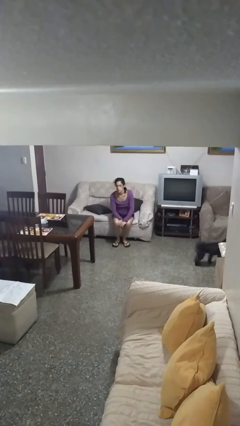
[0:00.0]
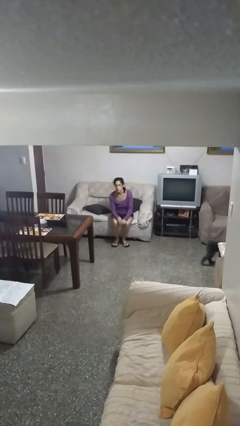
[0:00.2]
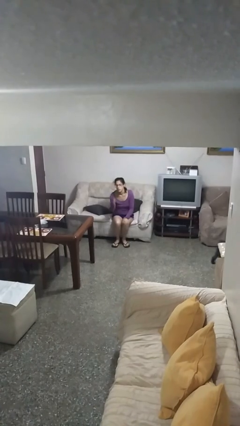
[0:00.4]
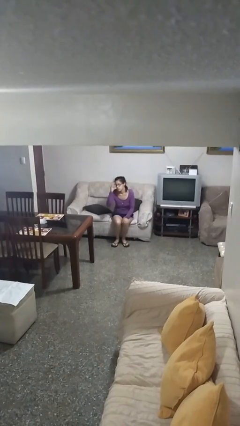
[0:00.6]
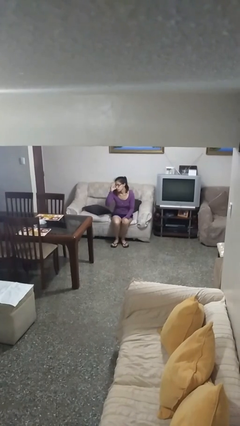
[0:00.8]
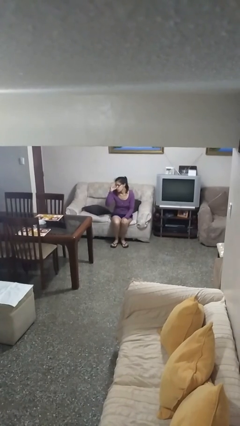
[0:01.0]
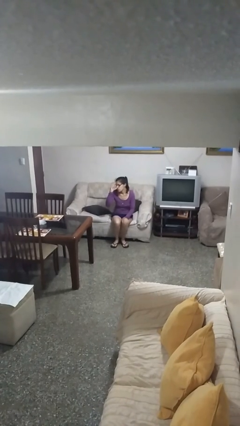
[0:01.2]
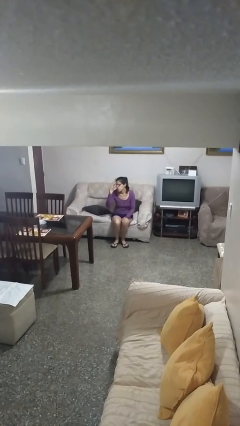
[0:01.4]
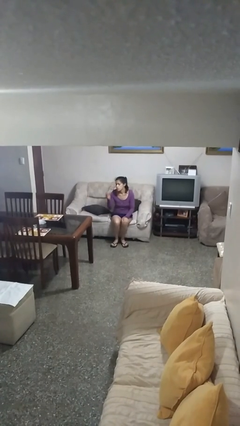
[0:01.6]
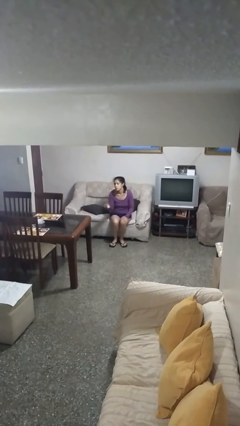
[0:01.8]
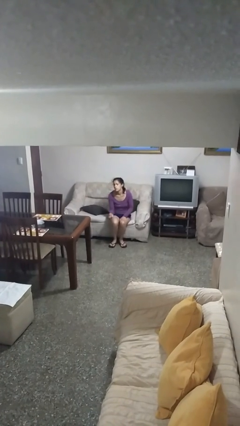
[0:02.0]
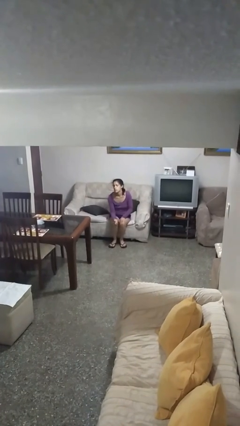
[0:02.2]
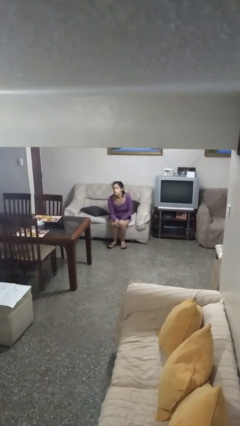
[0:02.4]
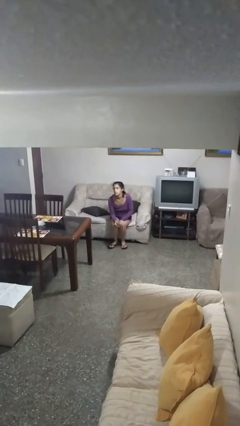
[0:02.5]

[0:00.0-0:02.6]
person takes off glasses

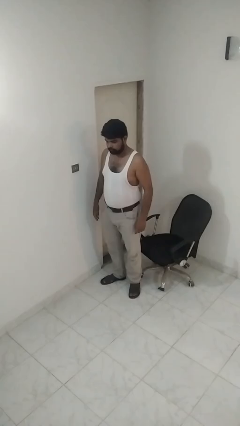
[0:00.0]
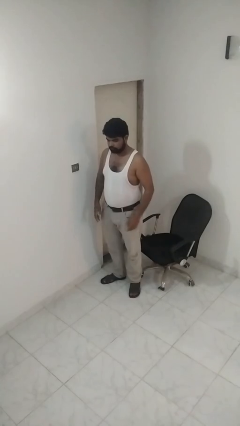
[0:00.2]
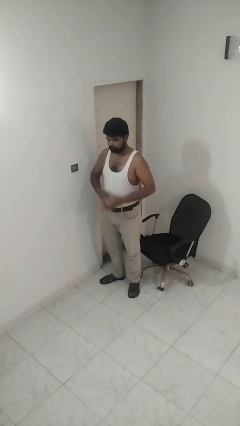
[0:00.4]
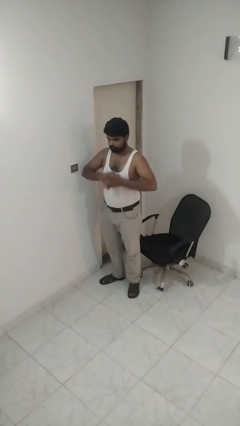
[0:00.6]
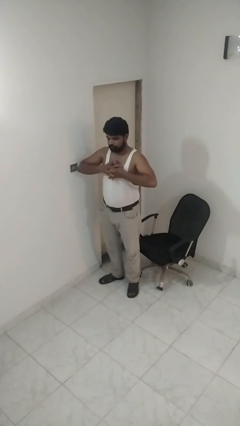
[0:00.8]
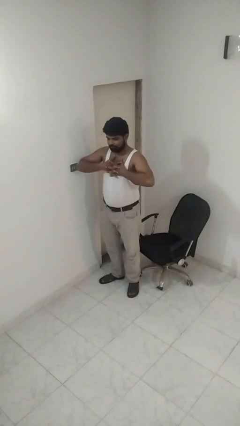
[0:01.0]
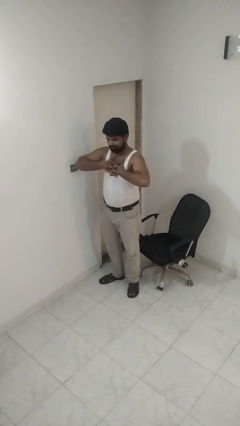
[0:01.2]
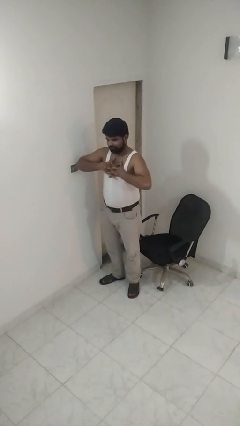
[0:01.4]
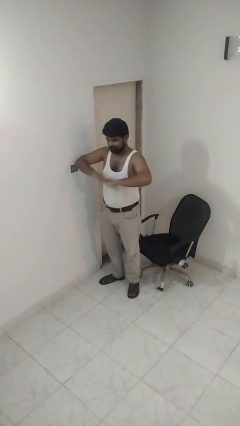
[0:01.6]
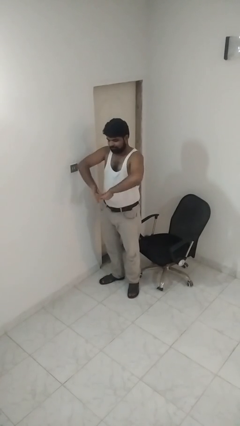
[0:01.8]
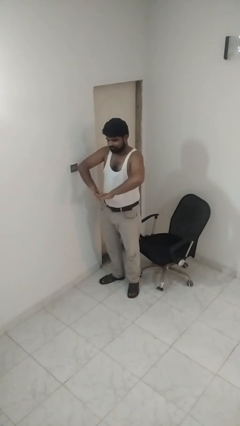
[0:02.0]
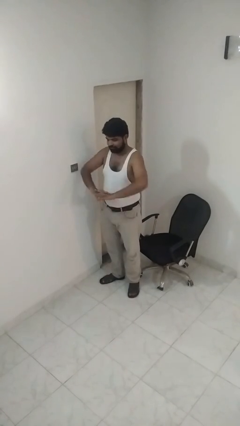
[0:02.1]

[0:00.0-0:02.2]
person cracks knuckles

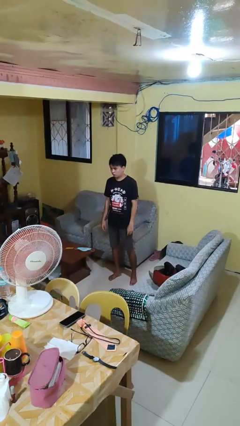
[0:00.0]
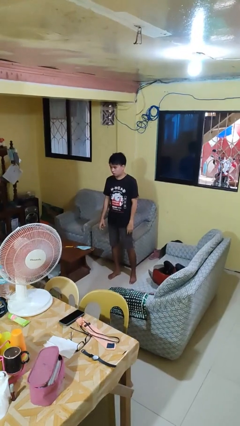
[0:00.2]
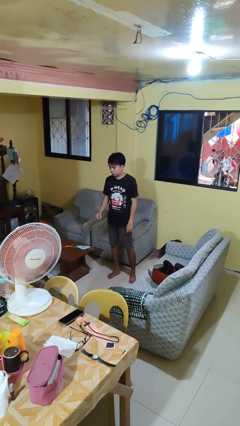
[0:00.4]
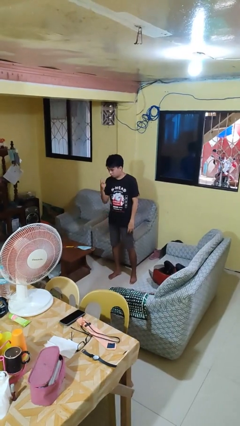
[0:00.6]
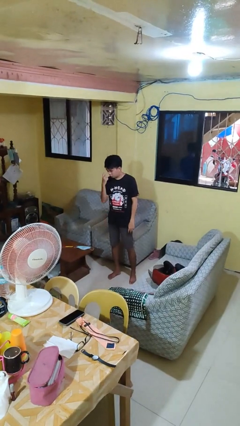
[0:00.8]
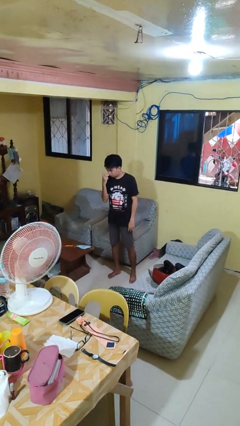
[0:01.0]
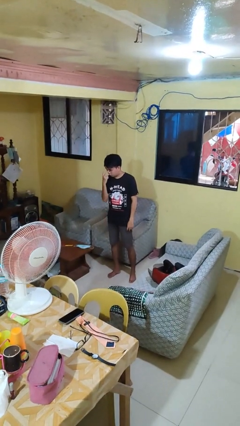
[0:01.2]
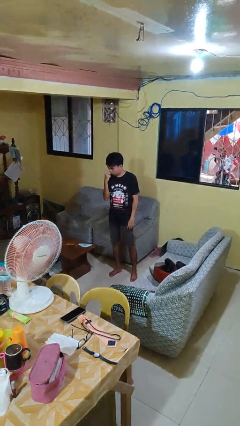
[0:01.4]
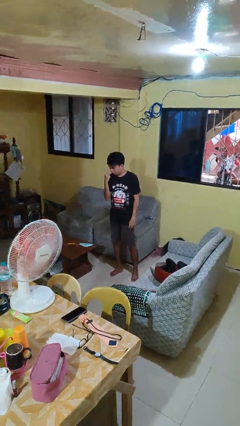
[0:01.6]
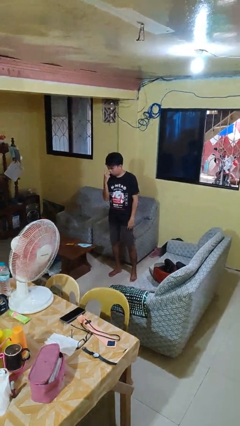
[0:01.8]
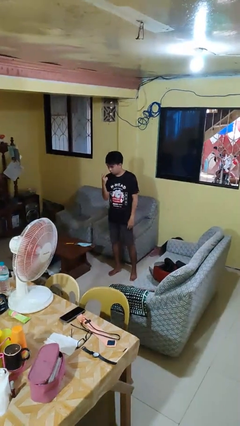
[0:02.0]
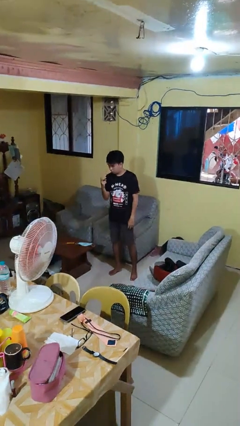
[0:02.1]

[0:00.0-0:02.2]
person gestures watch closely

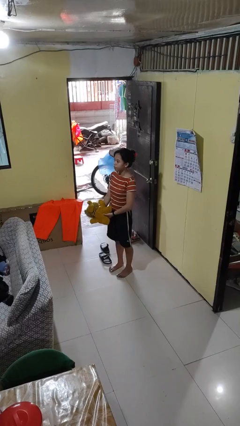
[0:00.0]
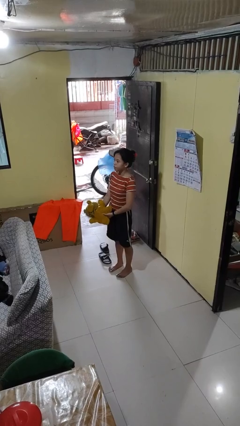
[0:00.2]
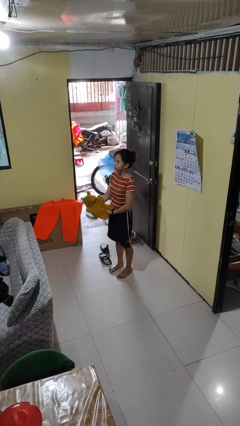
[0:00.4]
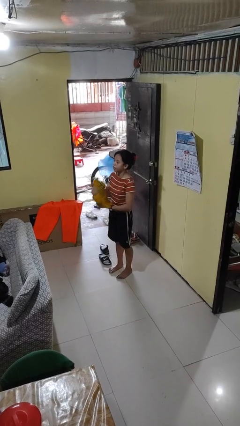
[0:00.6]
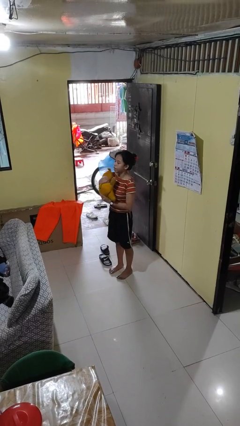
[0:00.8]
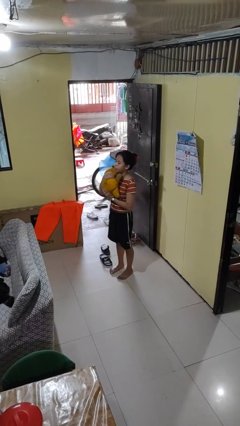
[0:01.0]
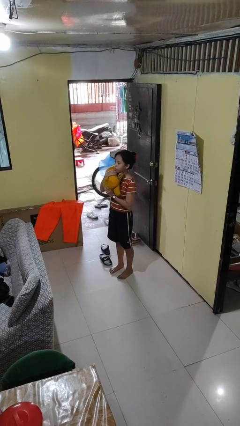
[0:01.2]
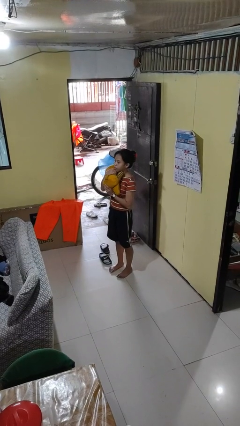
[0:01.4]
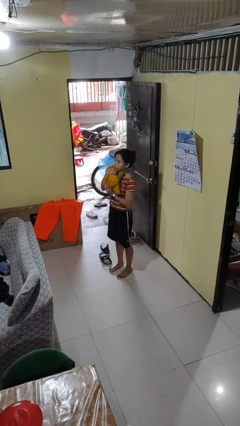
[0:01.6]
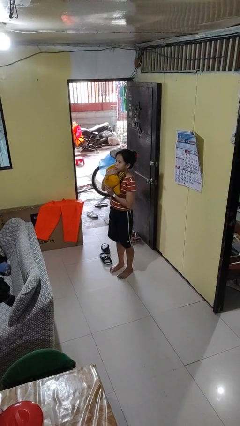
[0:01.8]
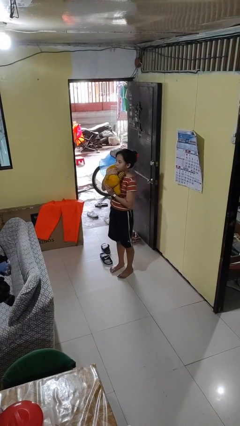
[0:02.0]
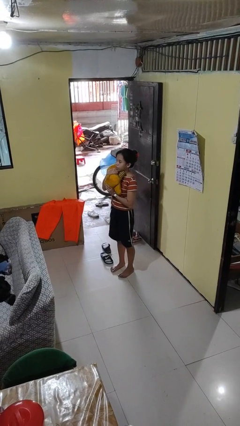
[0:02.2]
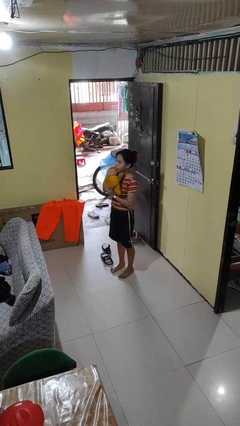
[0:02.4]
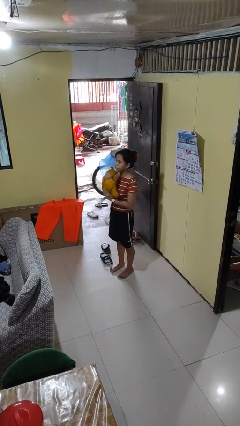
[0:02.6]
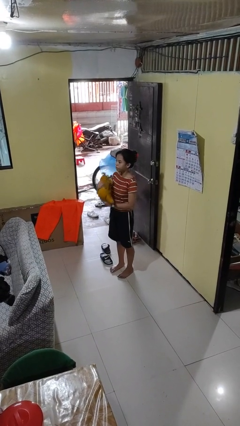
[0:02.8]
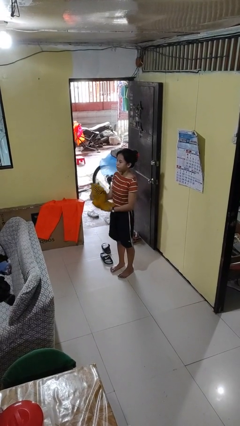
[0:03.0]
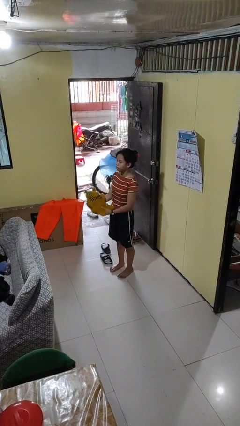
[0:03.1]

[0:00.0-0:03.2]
person hugs stuffed animal

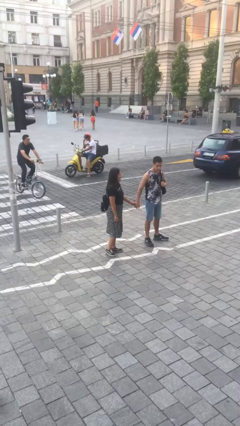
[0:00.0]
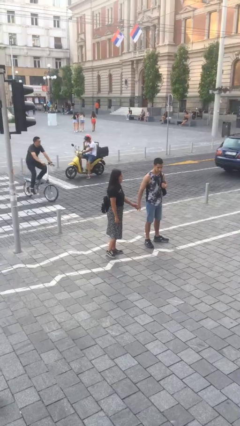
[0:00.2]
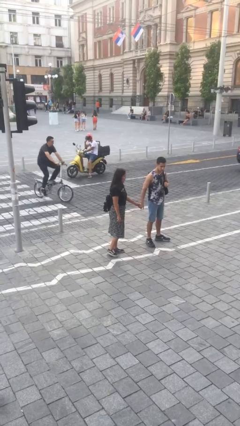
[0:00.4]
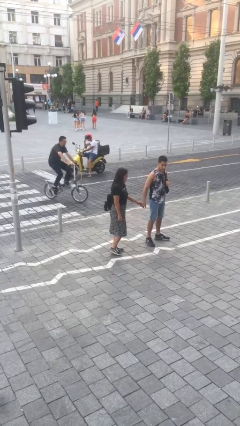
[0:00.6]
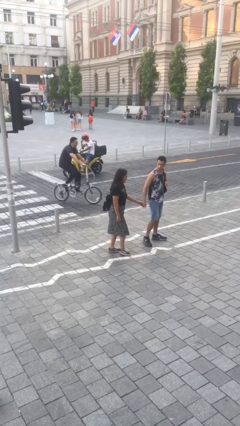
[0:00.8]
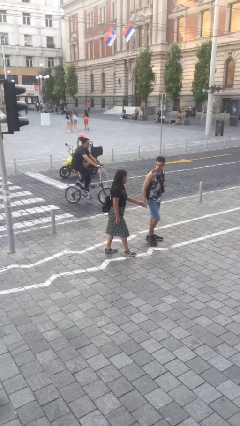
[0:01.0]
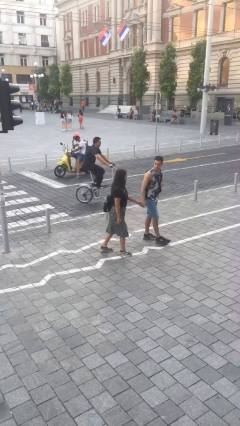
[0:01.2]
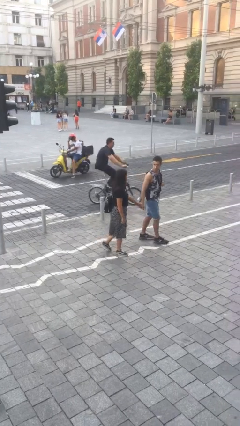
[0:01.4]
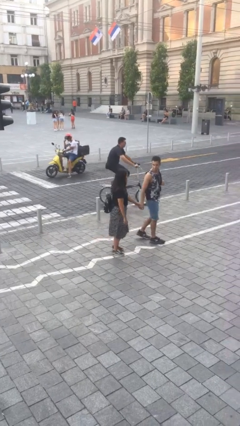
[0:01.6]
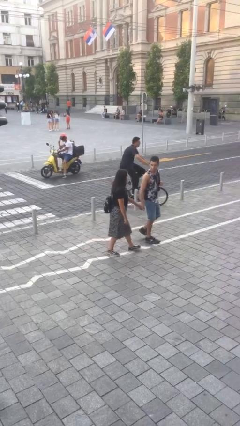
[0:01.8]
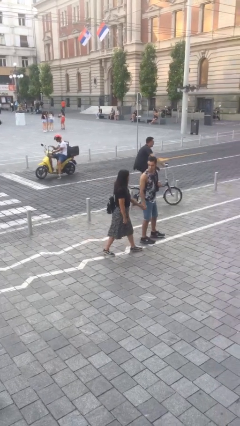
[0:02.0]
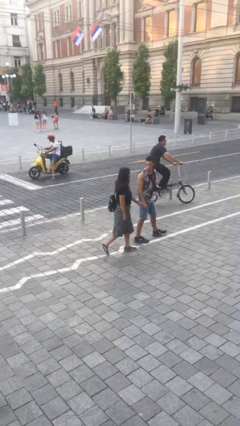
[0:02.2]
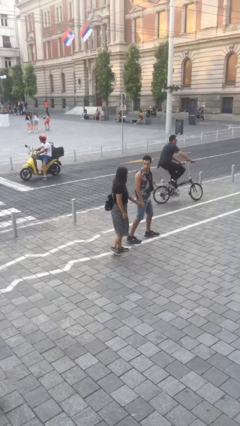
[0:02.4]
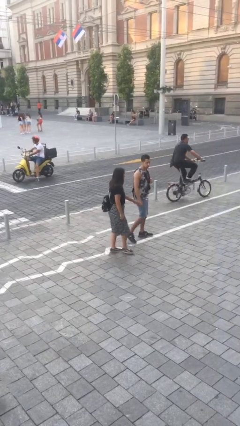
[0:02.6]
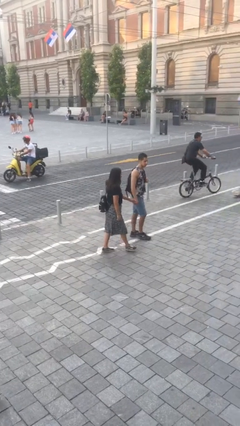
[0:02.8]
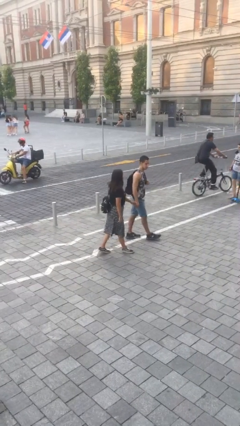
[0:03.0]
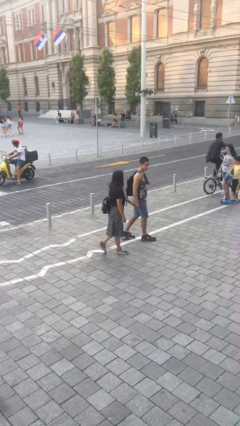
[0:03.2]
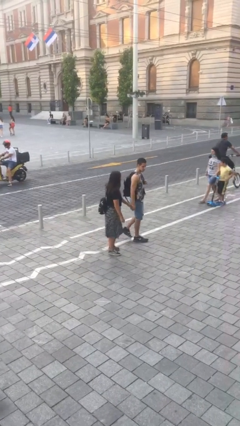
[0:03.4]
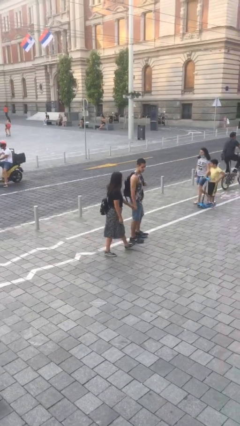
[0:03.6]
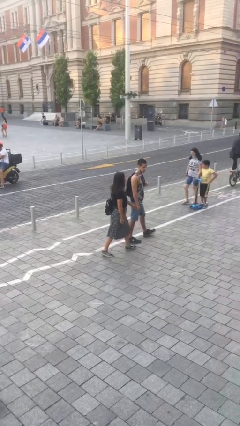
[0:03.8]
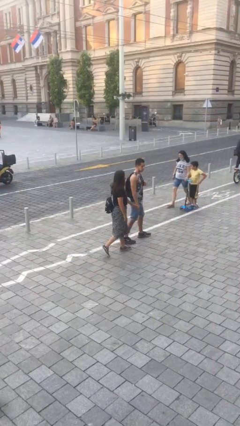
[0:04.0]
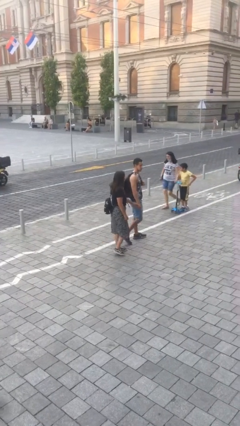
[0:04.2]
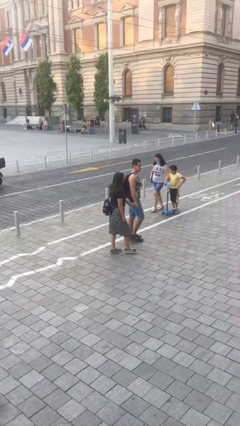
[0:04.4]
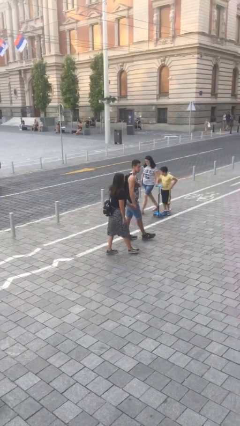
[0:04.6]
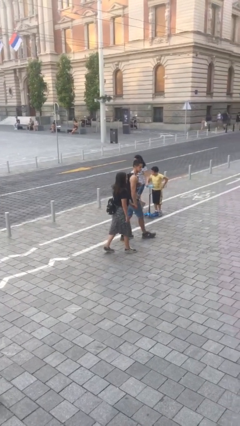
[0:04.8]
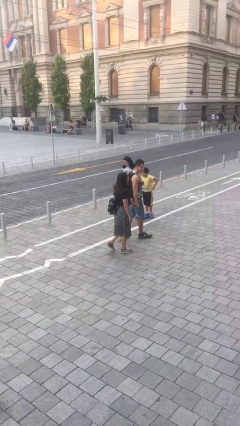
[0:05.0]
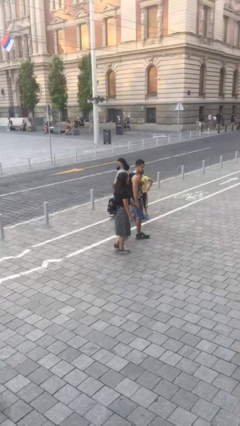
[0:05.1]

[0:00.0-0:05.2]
person holds hand

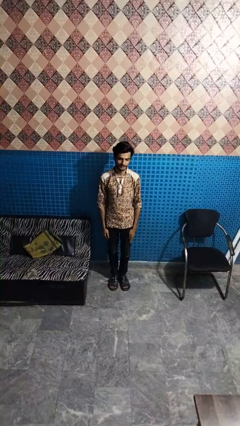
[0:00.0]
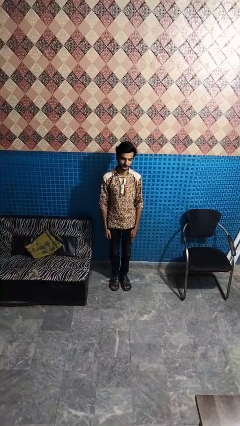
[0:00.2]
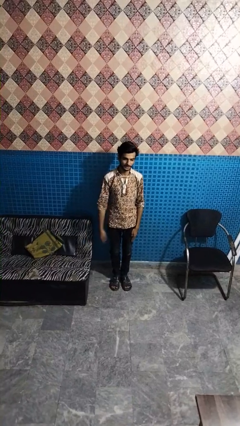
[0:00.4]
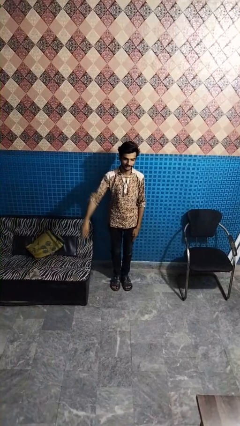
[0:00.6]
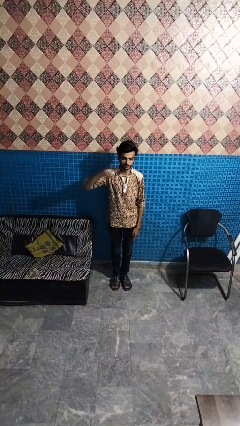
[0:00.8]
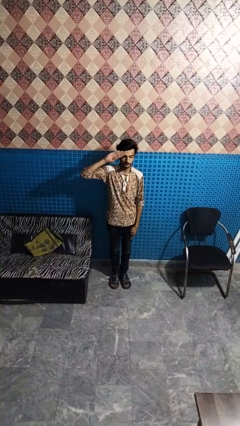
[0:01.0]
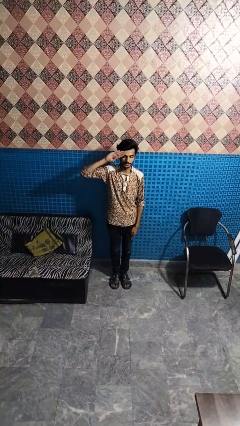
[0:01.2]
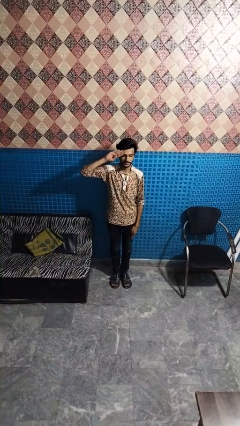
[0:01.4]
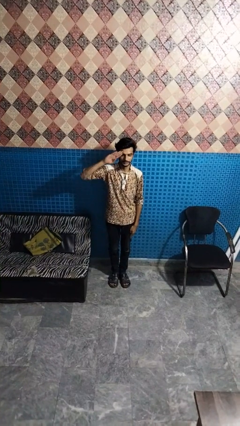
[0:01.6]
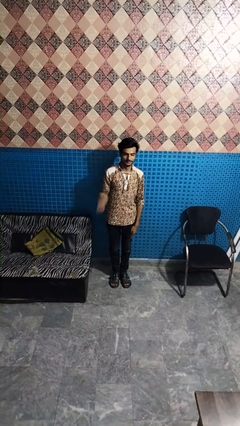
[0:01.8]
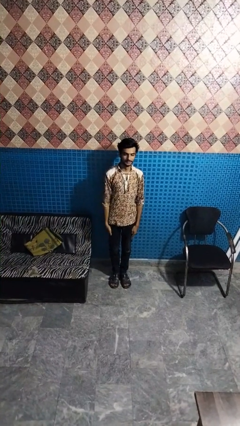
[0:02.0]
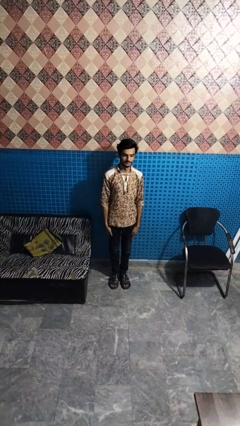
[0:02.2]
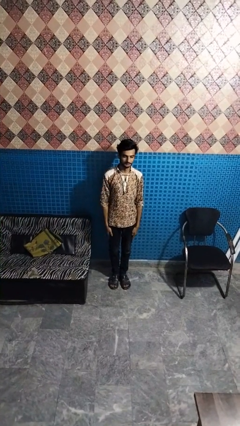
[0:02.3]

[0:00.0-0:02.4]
person salutes
